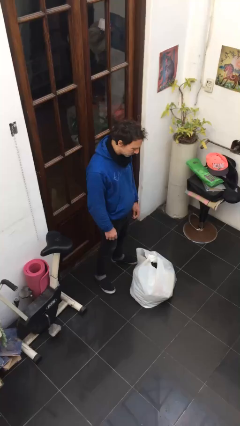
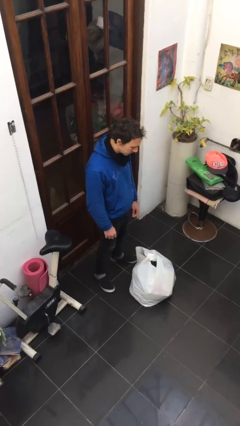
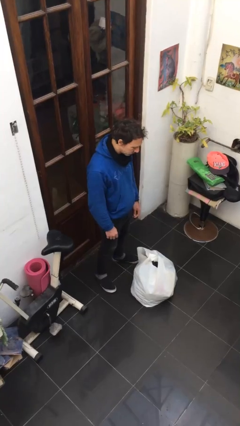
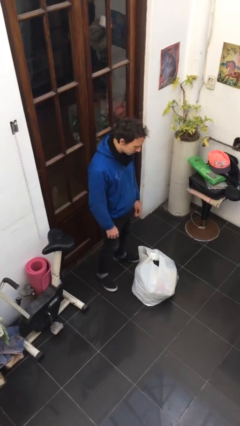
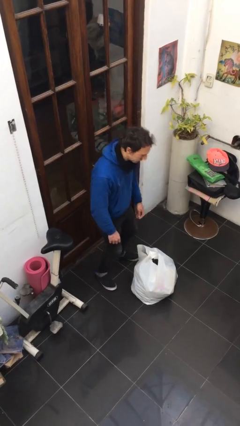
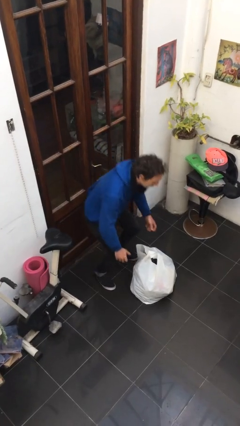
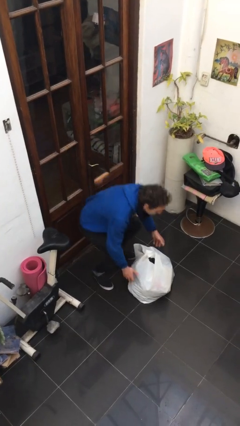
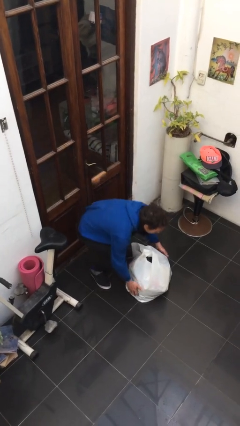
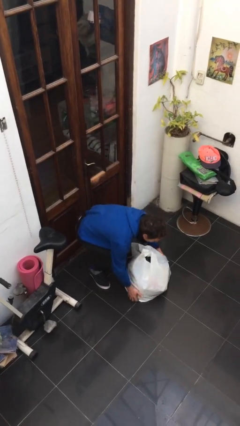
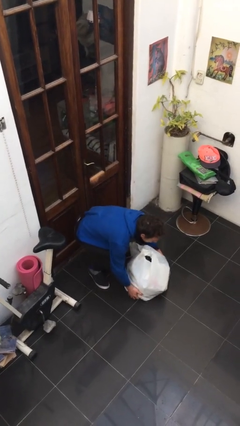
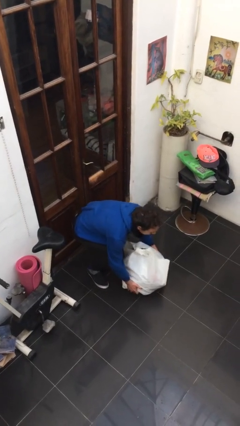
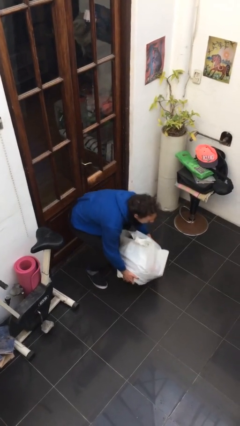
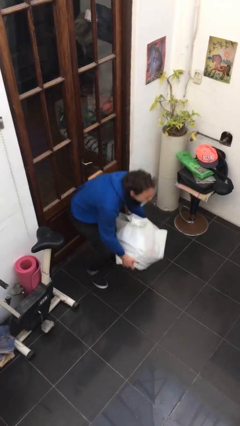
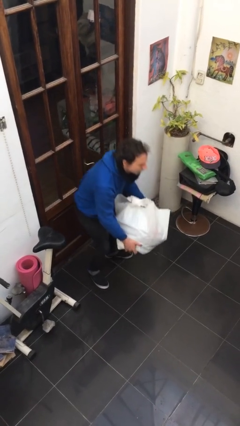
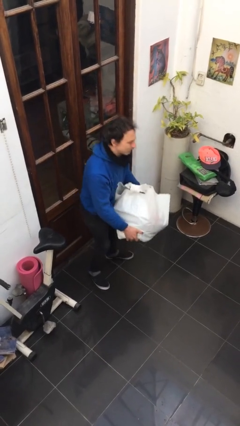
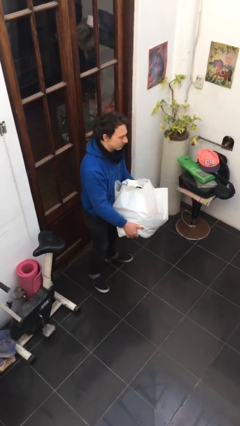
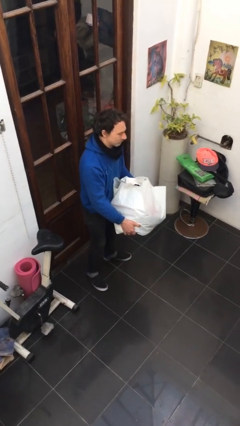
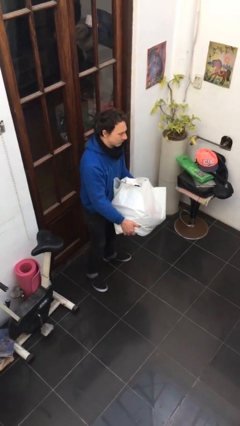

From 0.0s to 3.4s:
person picks up object from floor

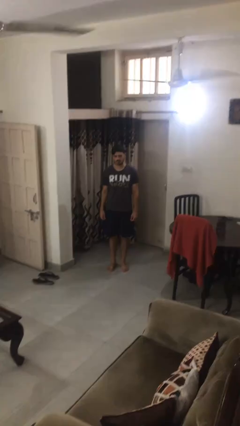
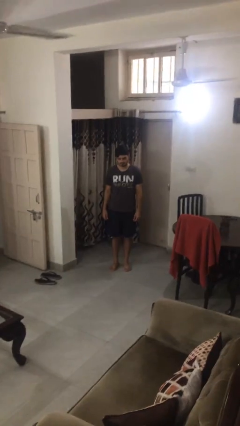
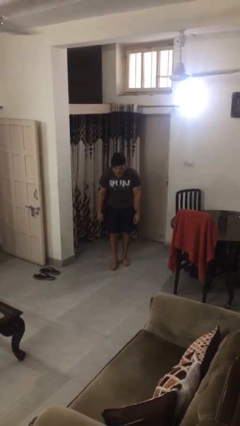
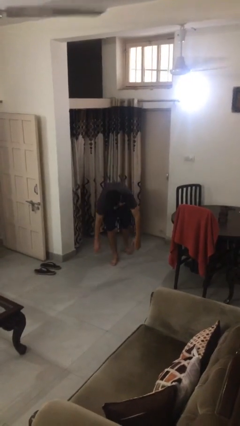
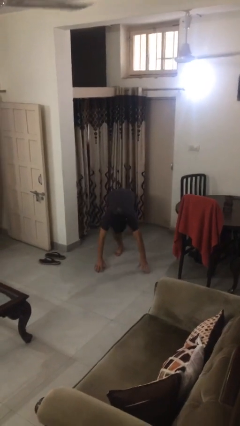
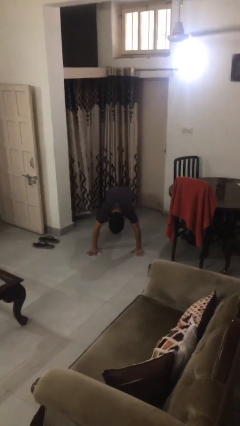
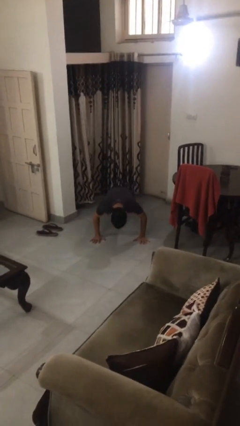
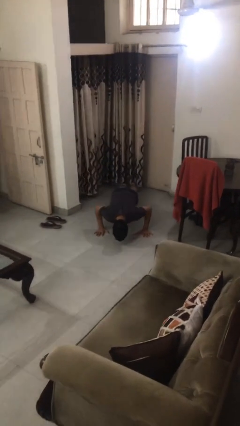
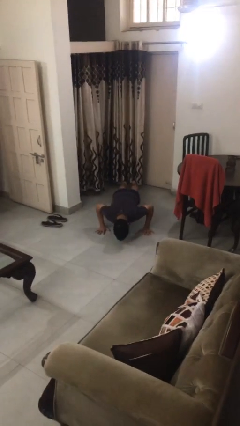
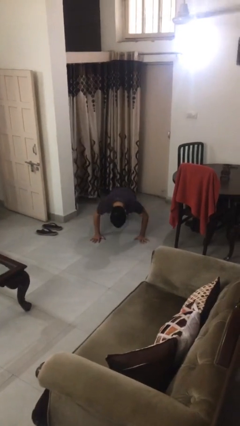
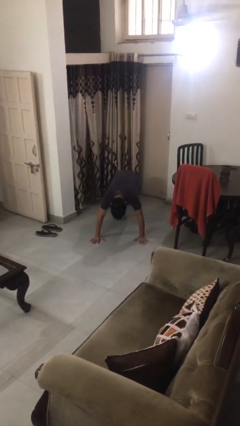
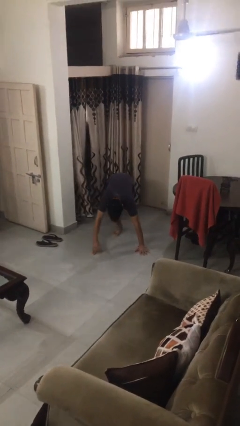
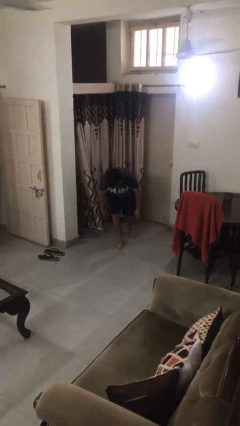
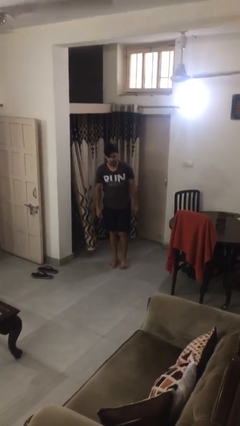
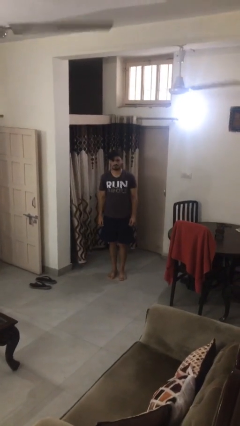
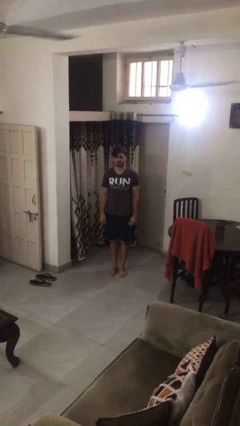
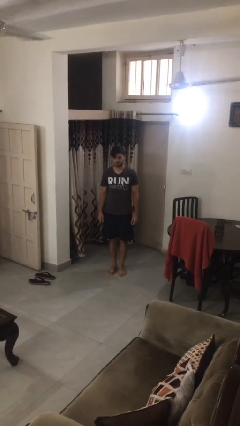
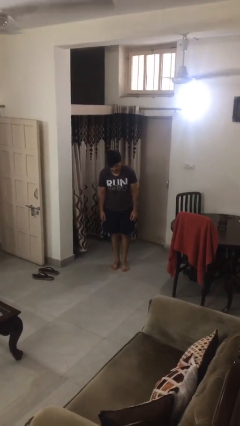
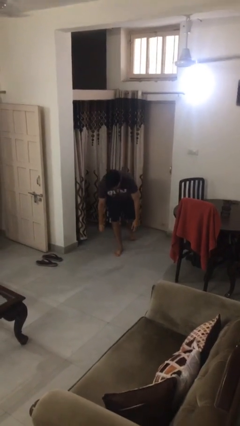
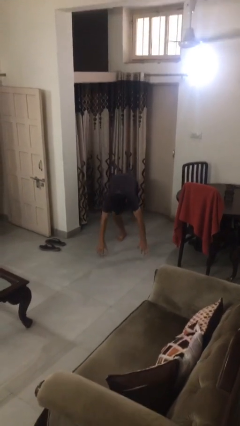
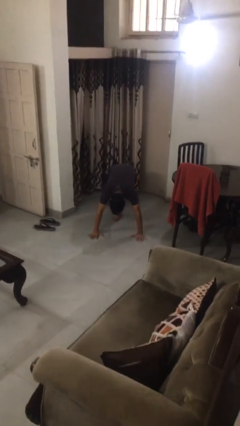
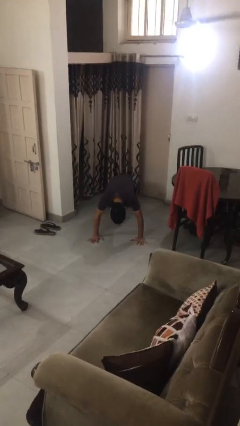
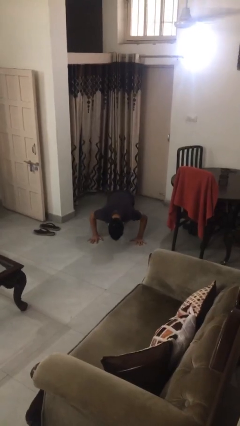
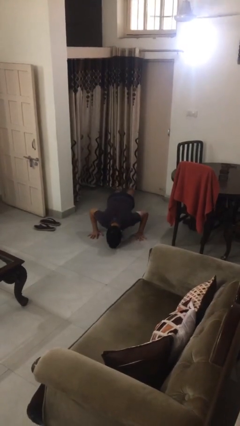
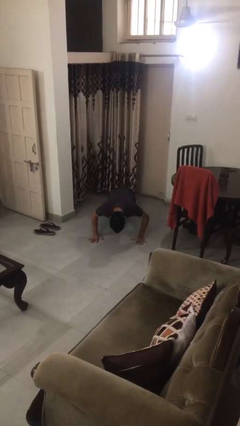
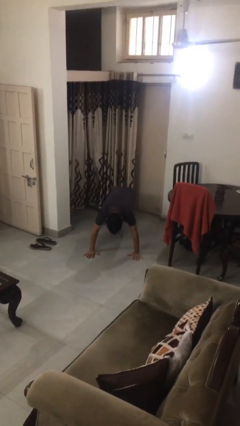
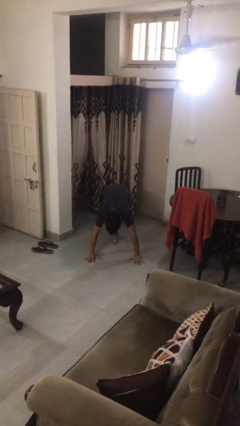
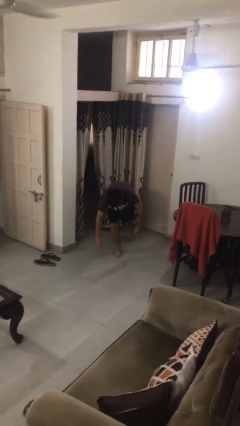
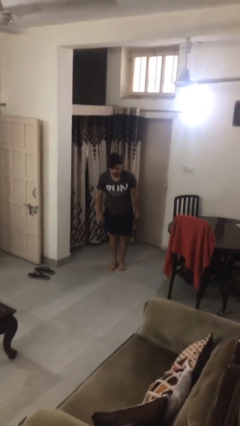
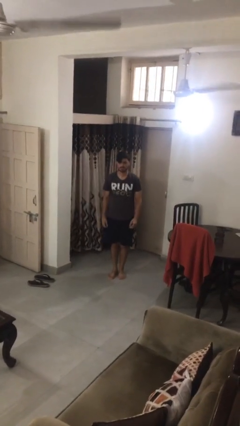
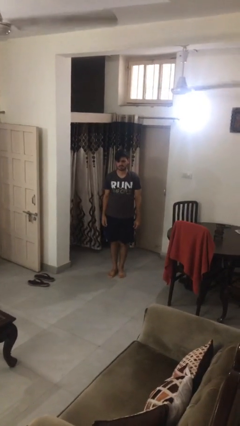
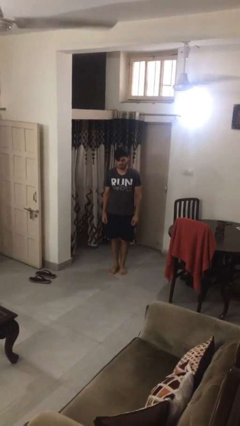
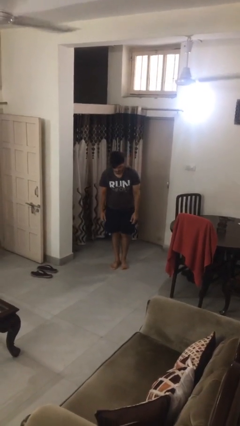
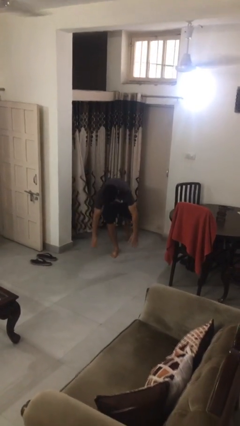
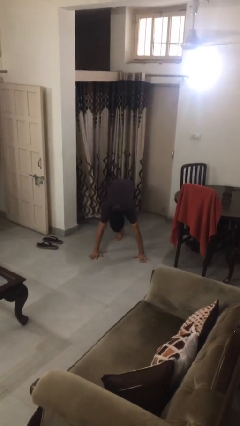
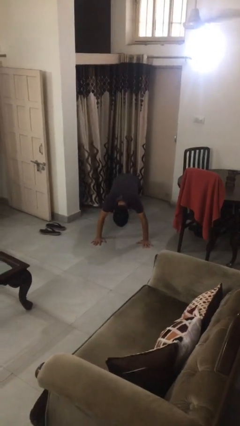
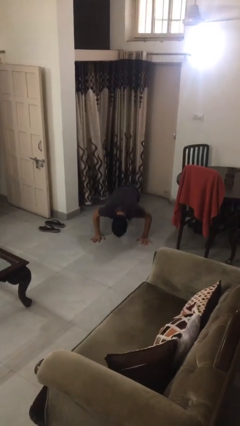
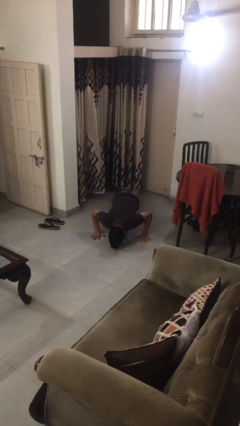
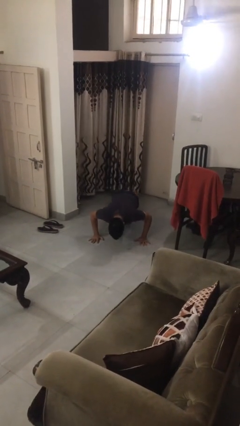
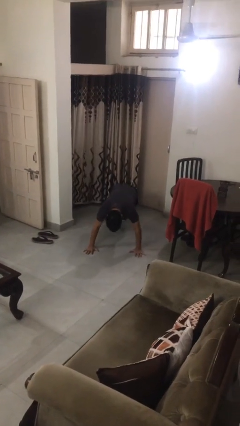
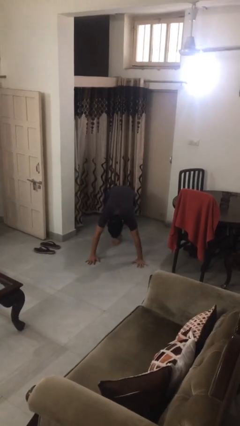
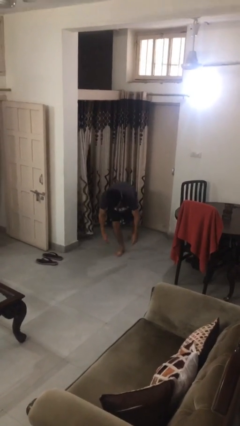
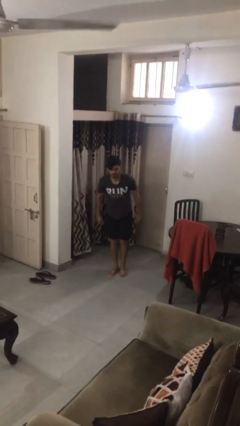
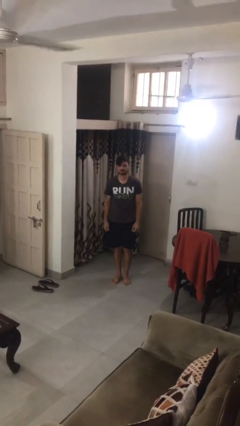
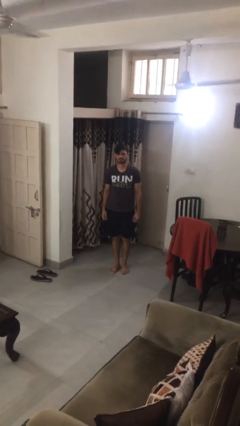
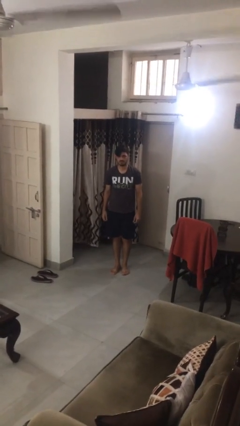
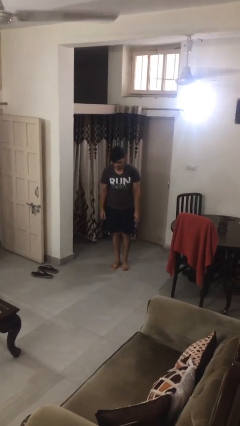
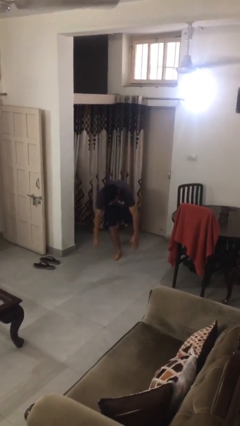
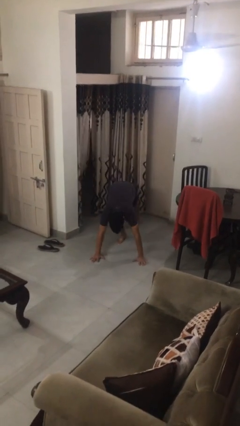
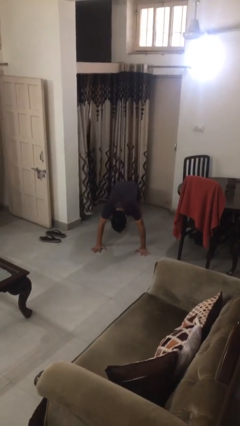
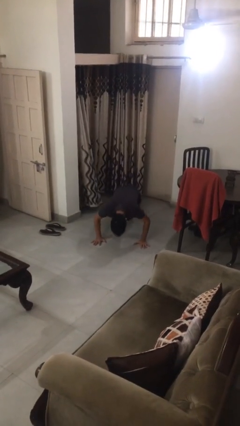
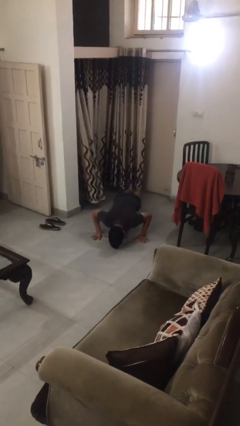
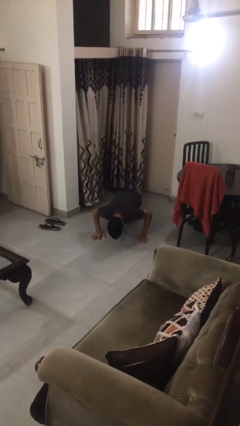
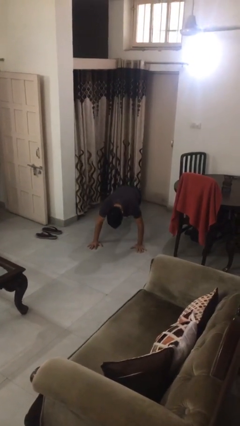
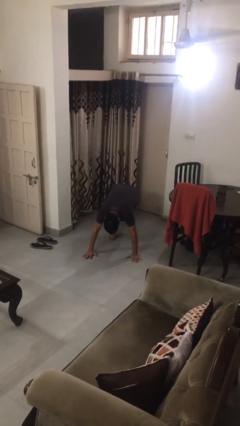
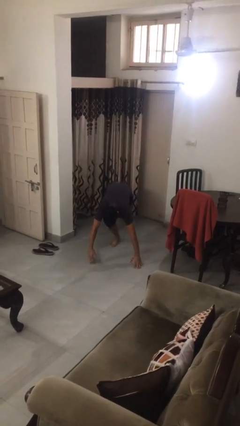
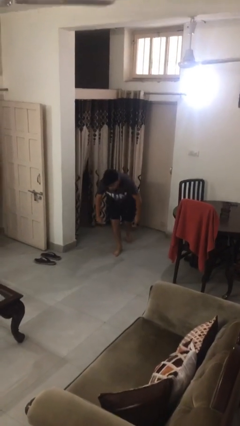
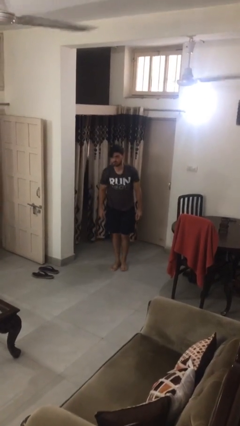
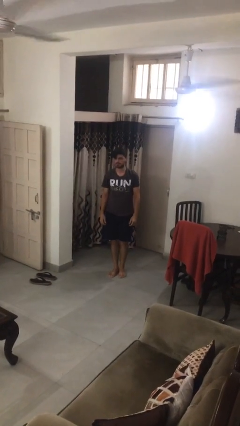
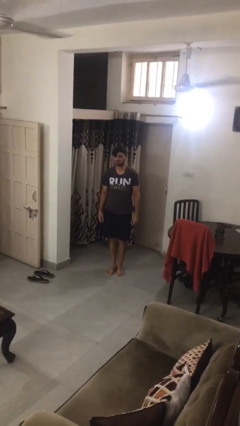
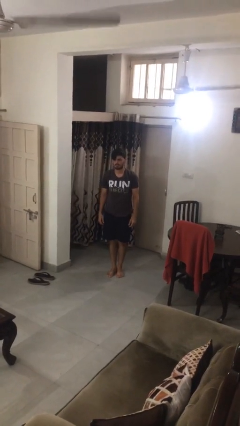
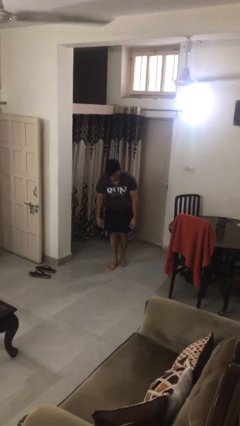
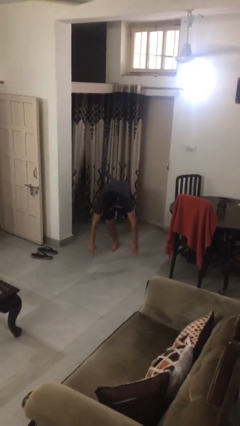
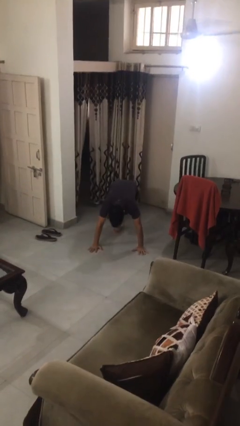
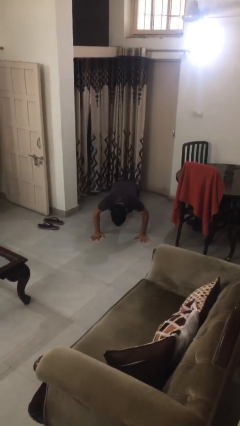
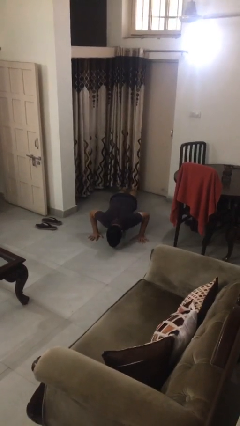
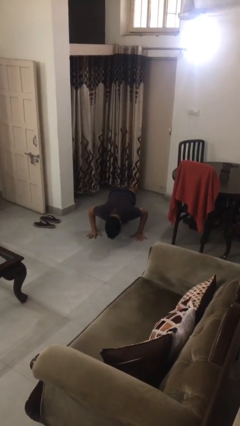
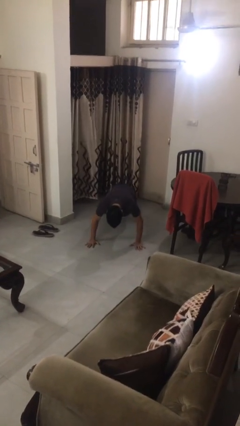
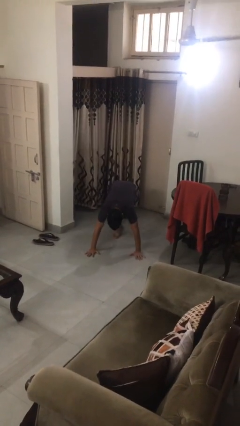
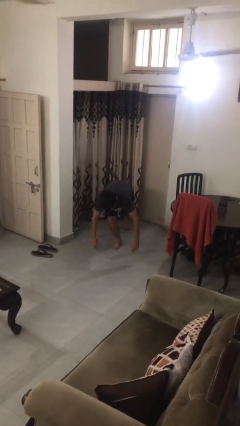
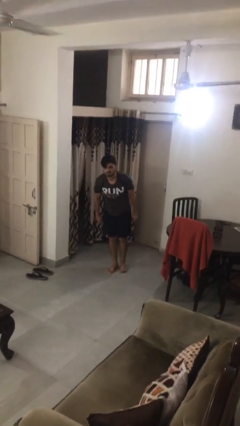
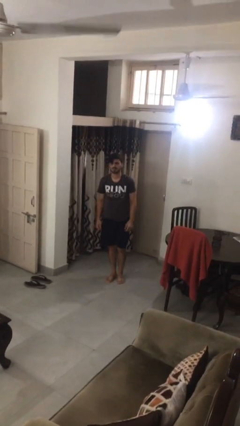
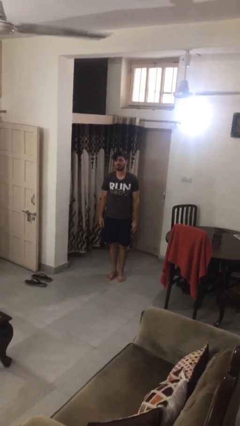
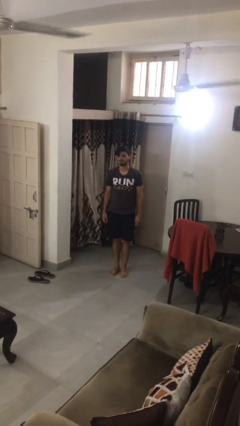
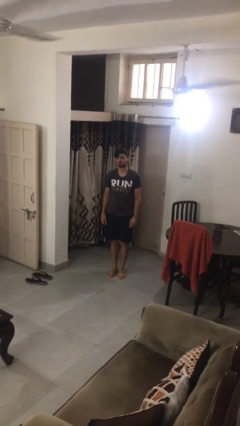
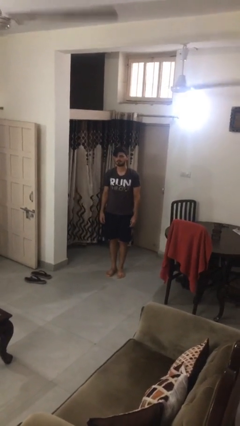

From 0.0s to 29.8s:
person exercises with pushup
